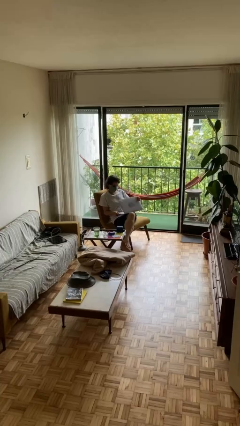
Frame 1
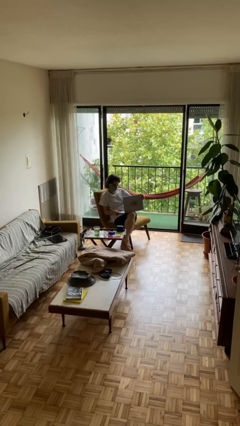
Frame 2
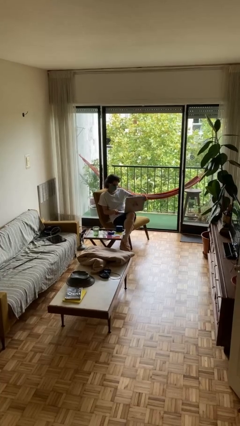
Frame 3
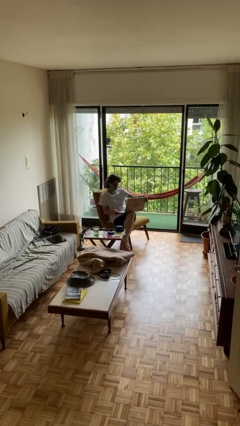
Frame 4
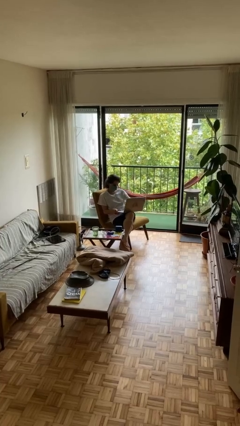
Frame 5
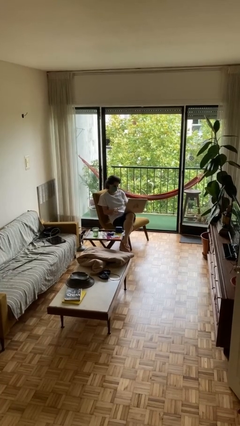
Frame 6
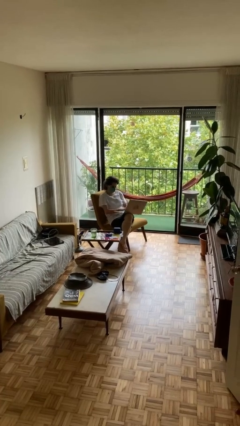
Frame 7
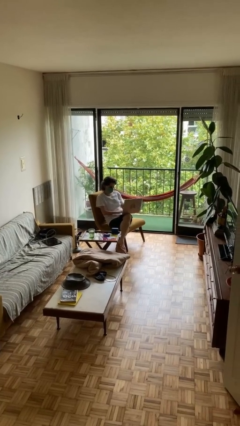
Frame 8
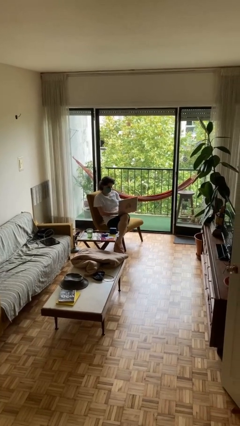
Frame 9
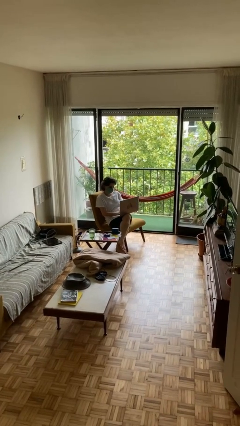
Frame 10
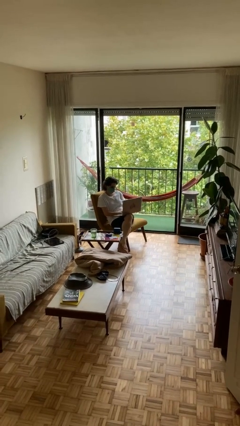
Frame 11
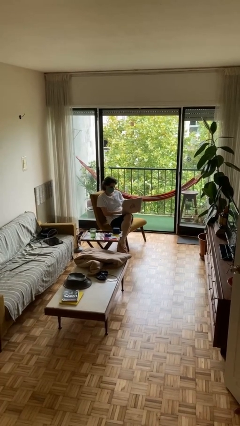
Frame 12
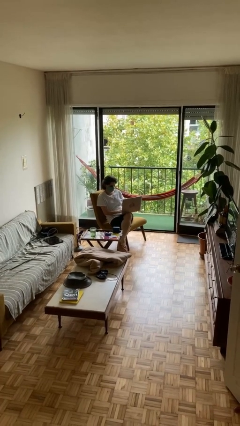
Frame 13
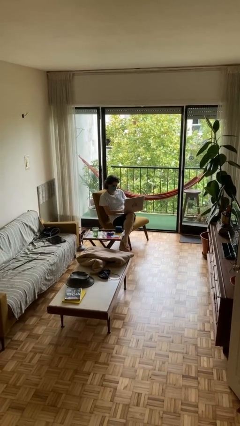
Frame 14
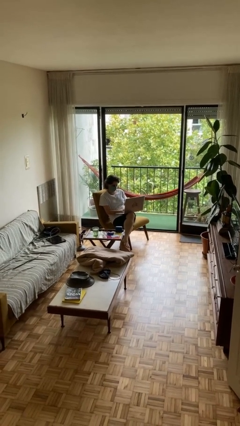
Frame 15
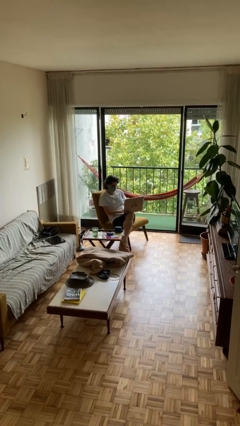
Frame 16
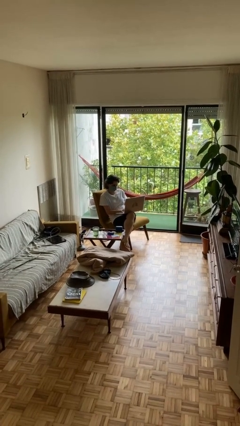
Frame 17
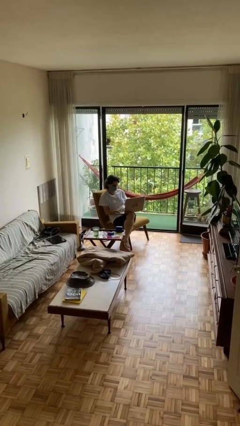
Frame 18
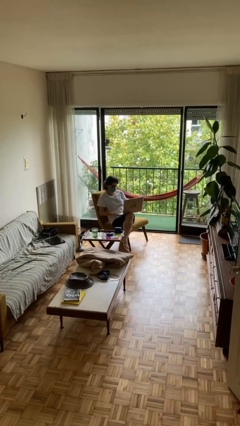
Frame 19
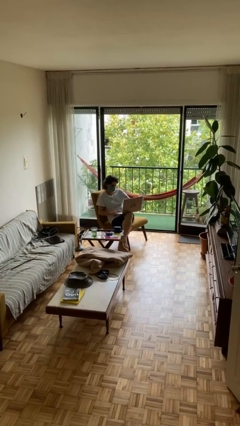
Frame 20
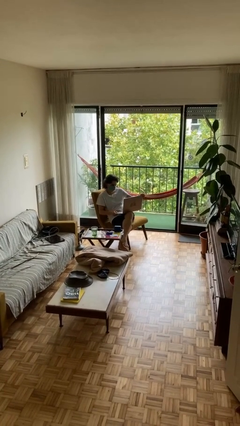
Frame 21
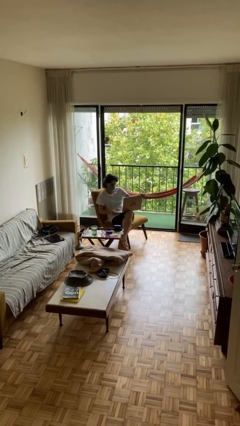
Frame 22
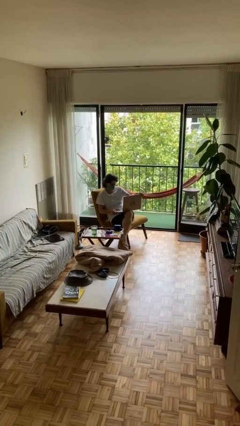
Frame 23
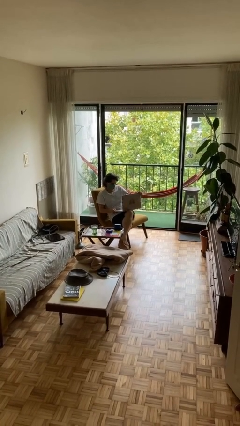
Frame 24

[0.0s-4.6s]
person interacts with laptop

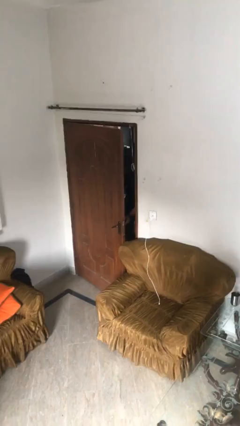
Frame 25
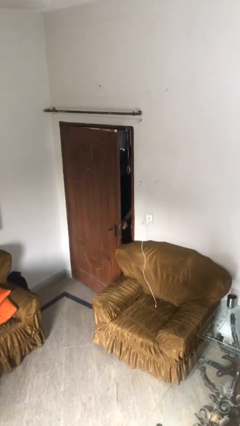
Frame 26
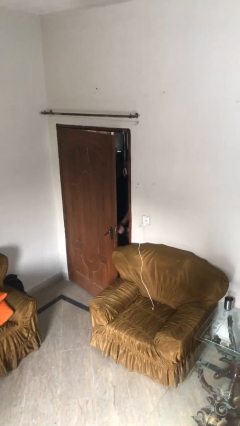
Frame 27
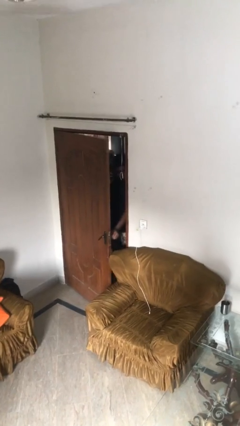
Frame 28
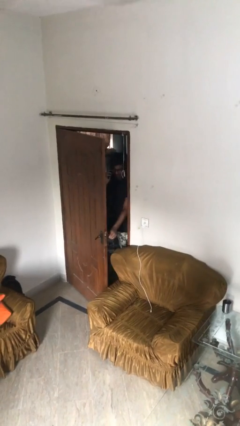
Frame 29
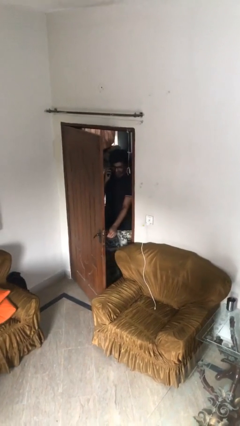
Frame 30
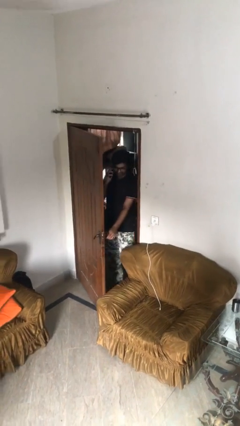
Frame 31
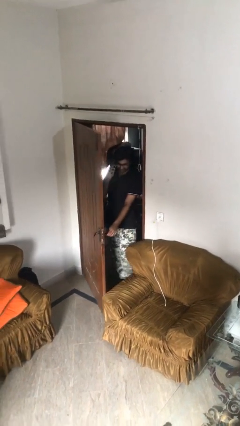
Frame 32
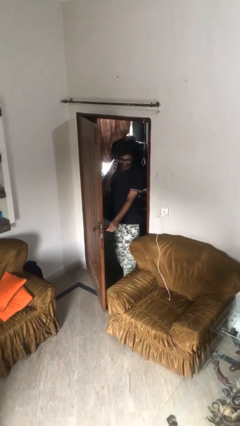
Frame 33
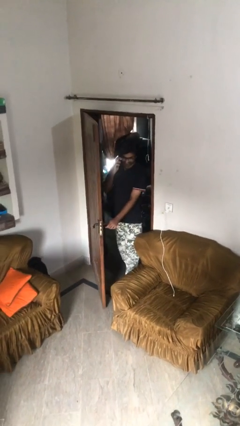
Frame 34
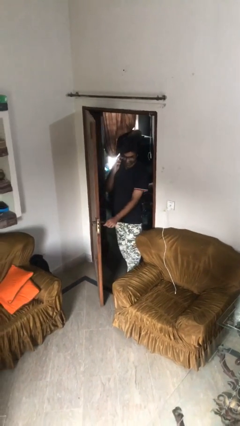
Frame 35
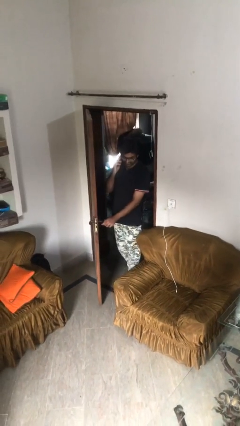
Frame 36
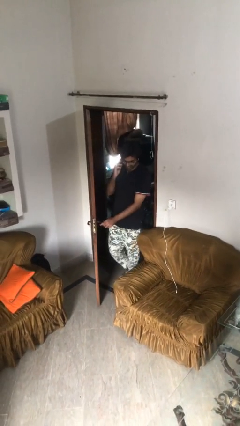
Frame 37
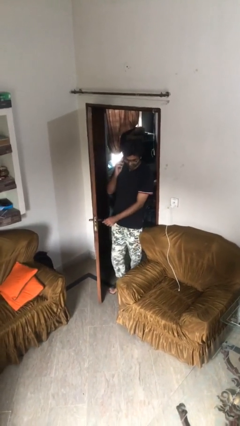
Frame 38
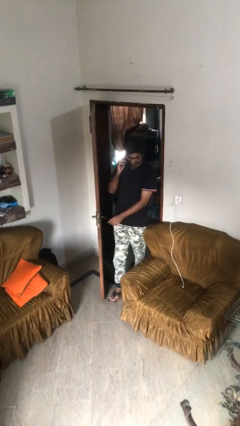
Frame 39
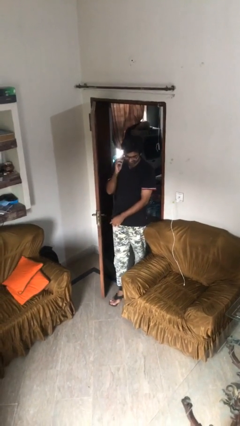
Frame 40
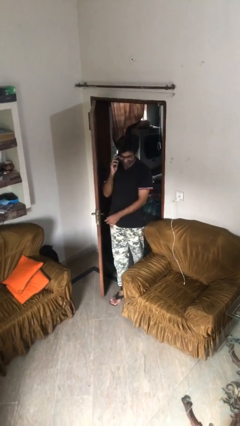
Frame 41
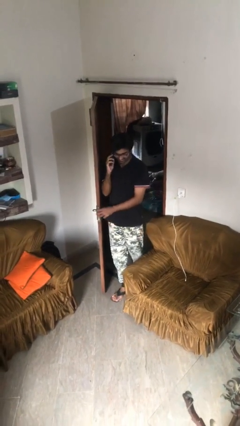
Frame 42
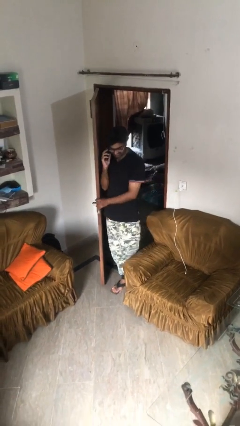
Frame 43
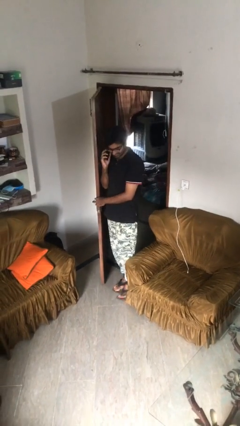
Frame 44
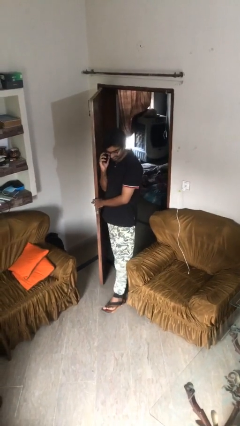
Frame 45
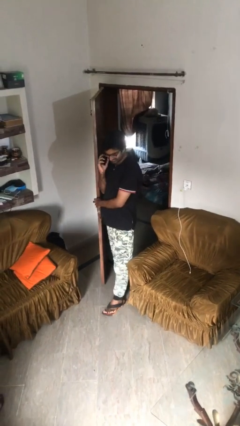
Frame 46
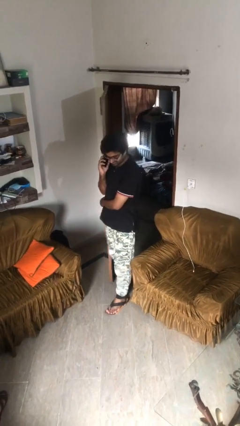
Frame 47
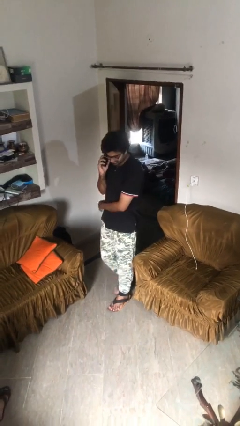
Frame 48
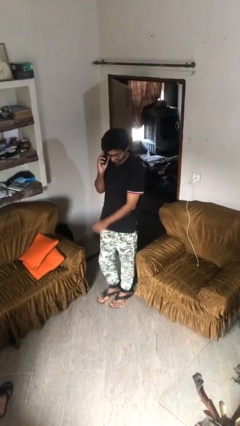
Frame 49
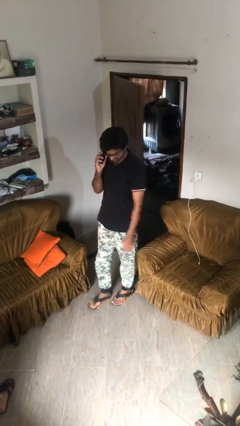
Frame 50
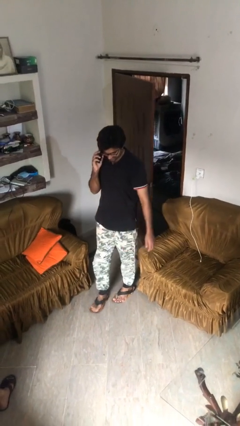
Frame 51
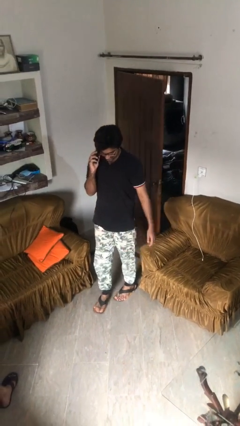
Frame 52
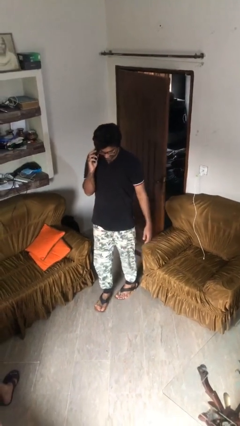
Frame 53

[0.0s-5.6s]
person enters scene through structure

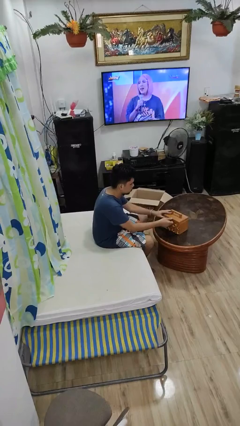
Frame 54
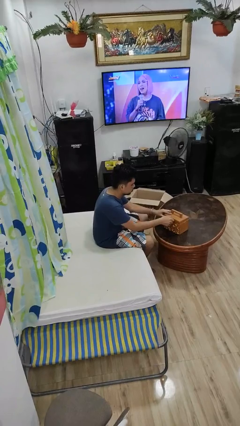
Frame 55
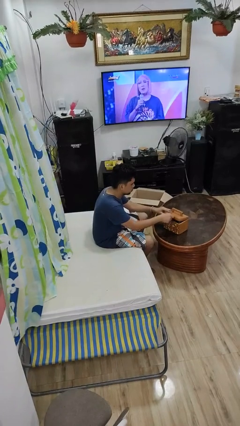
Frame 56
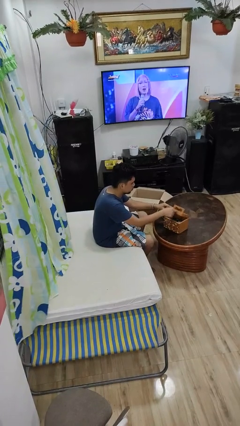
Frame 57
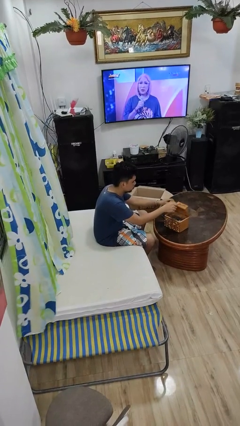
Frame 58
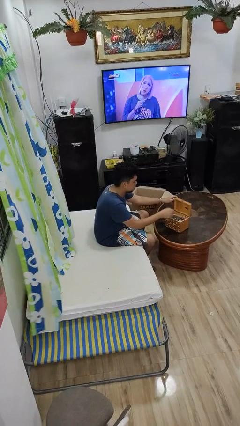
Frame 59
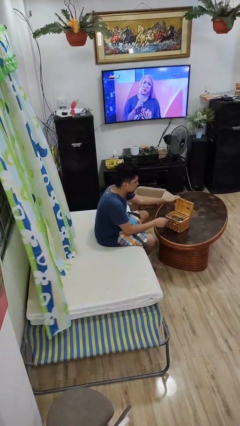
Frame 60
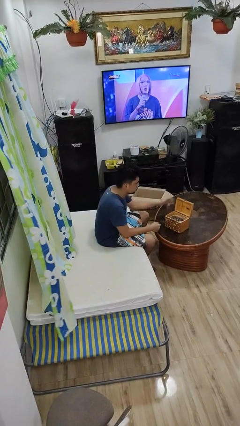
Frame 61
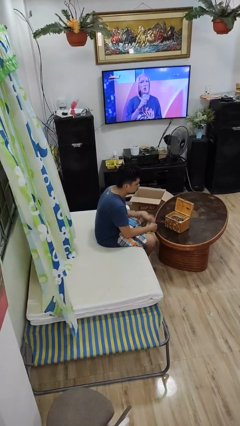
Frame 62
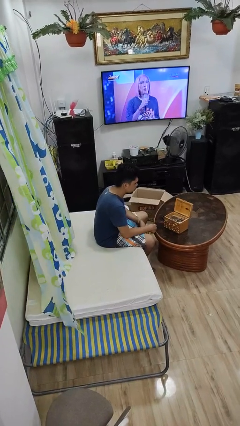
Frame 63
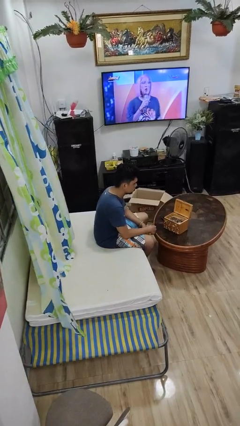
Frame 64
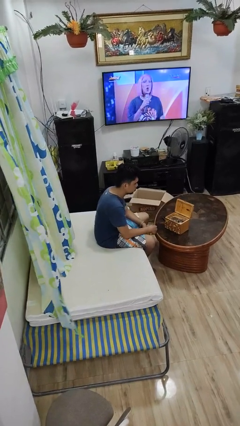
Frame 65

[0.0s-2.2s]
person opens jewelry box

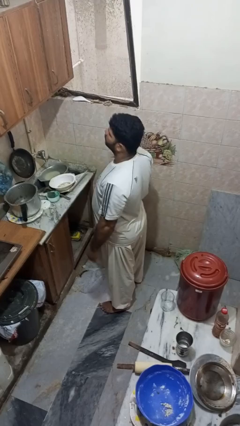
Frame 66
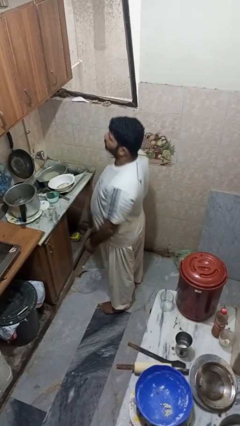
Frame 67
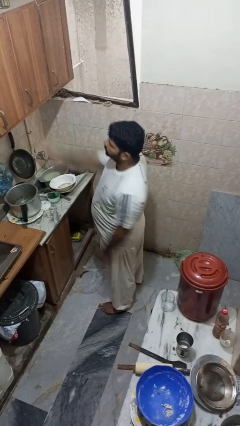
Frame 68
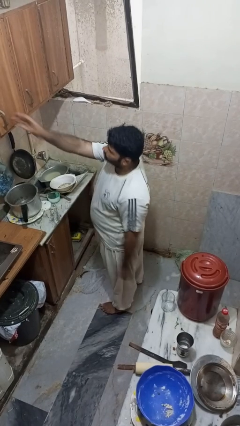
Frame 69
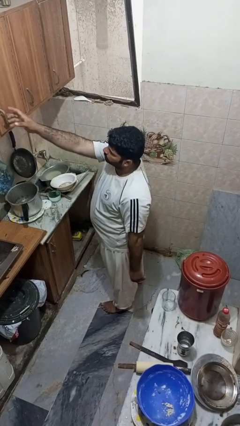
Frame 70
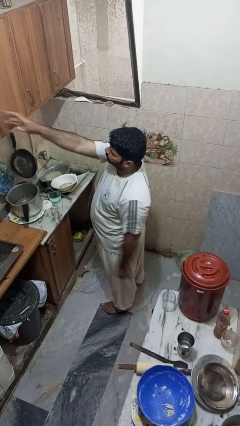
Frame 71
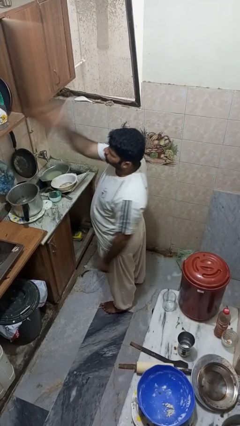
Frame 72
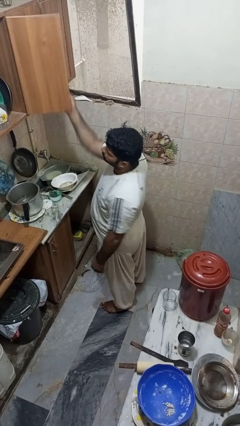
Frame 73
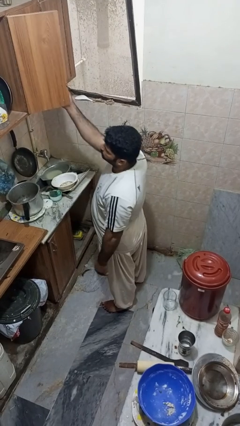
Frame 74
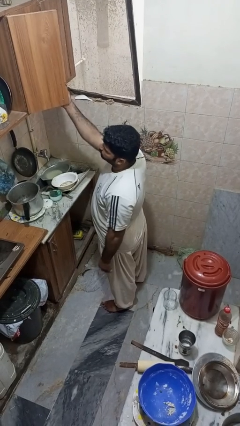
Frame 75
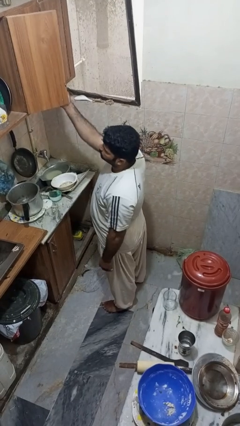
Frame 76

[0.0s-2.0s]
person opens cabinet

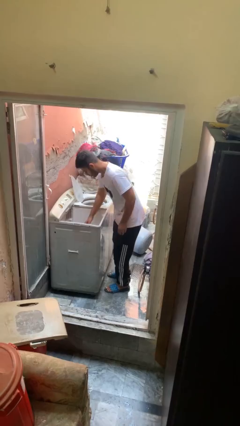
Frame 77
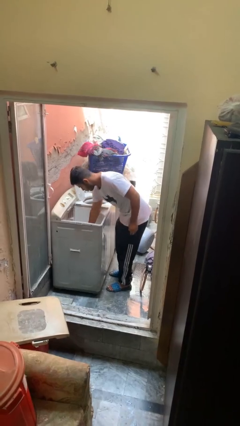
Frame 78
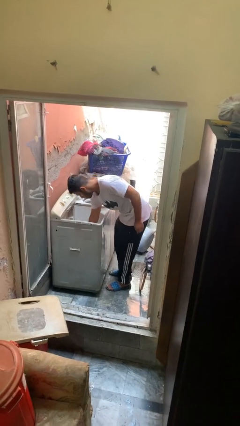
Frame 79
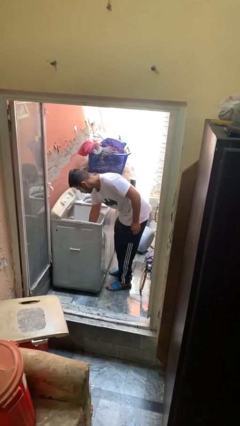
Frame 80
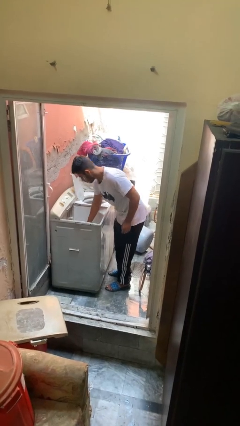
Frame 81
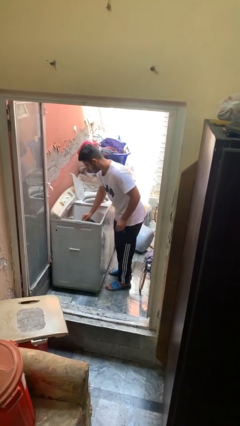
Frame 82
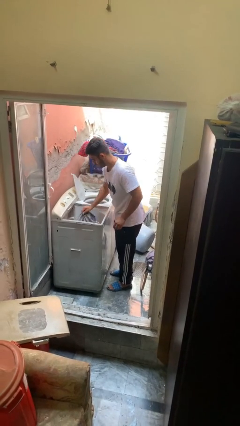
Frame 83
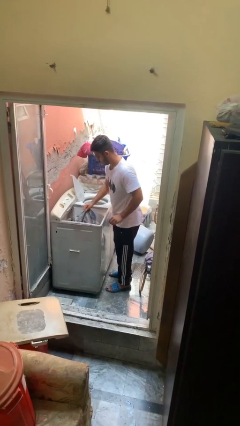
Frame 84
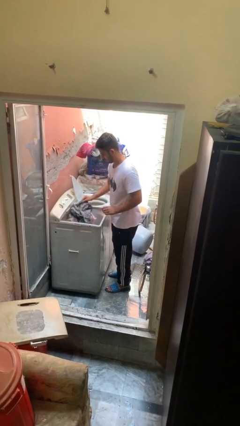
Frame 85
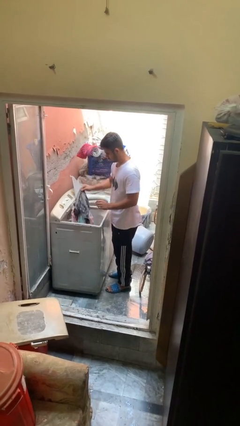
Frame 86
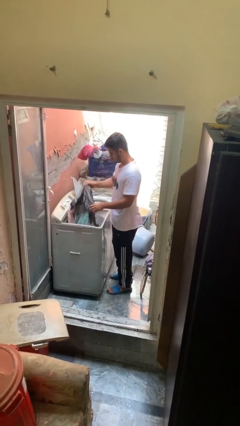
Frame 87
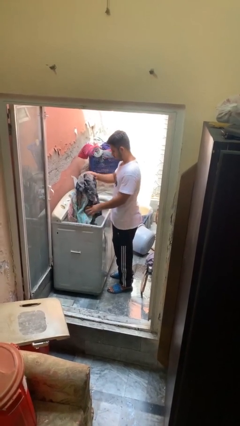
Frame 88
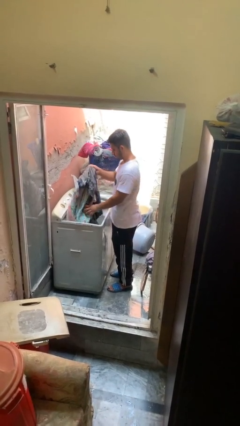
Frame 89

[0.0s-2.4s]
person unloads clotheswasher

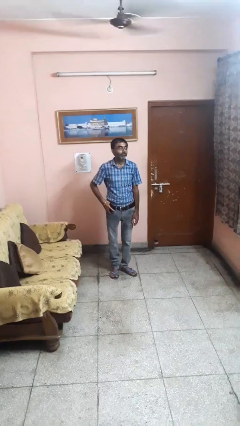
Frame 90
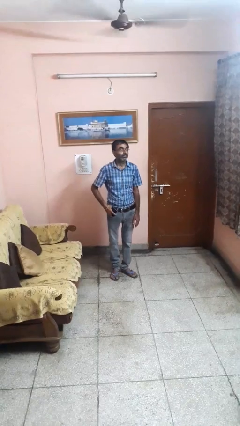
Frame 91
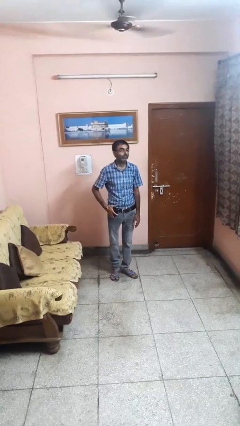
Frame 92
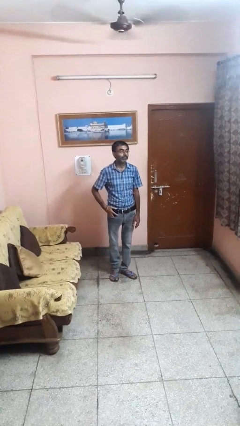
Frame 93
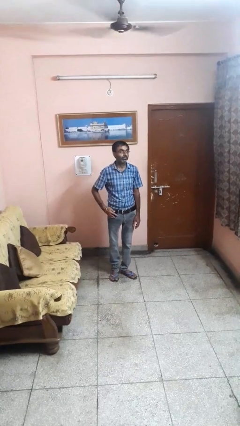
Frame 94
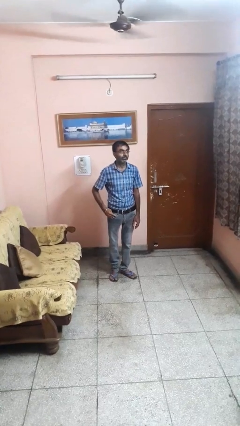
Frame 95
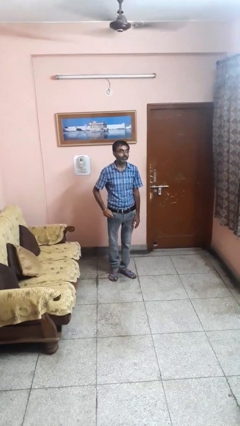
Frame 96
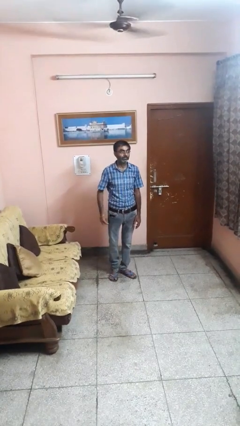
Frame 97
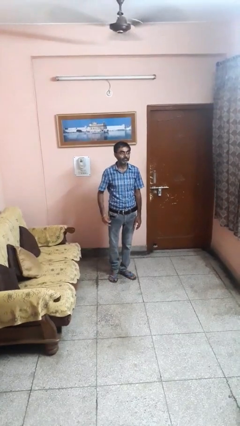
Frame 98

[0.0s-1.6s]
person puts phone into pocket
